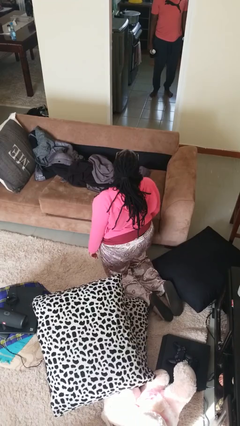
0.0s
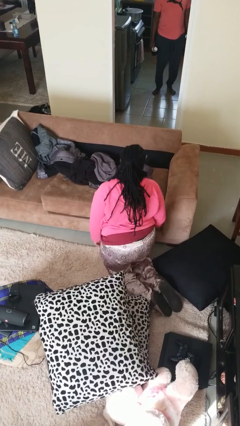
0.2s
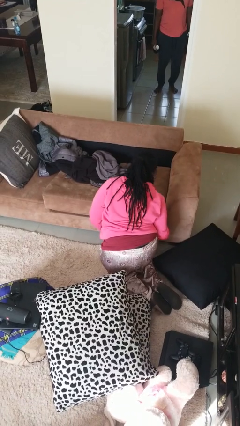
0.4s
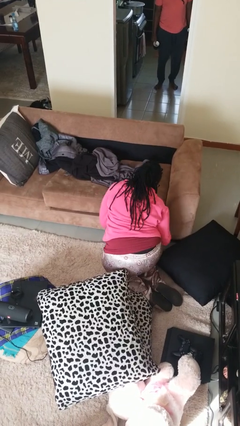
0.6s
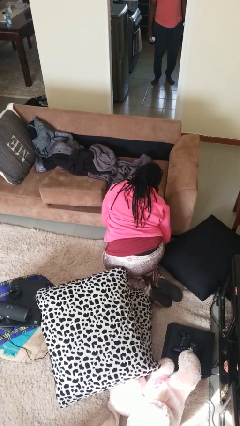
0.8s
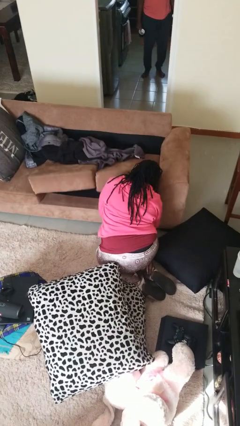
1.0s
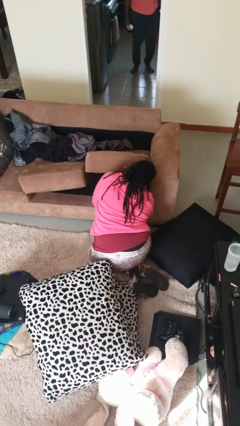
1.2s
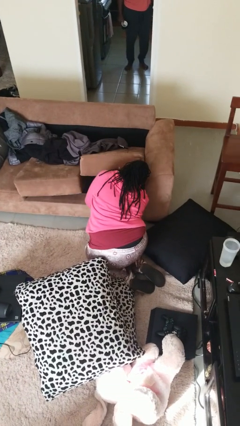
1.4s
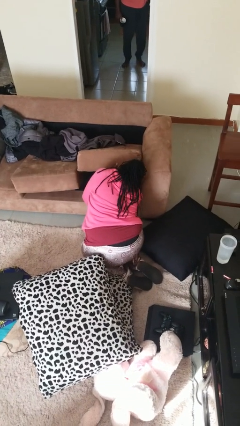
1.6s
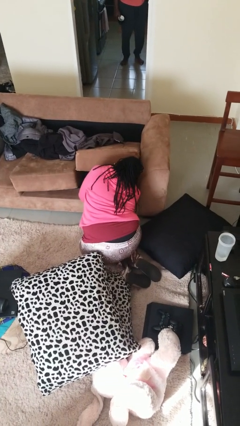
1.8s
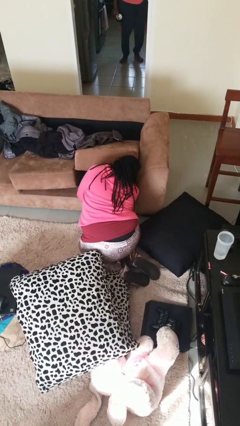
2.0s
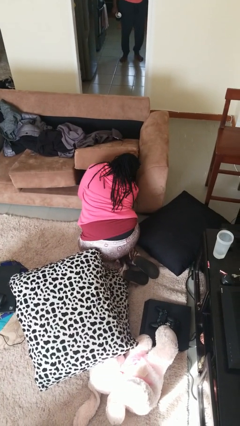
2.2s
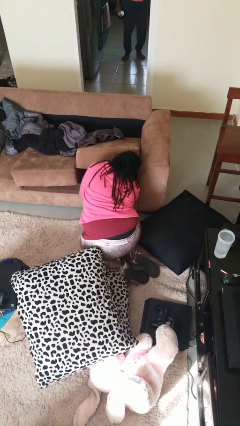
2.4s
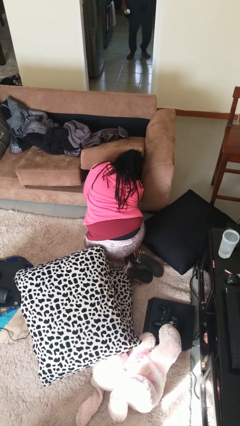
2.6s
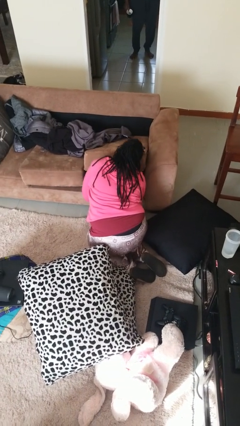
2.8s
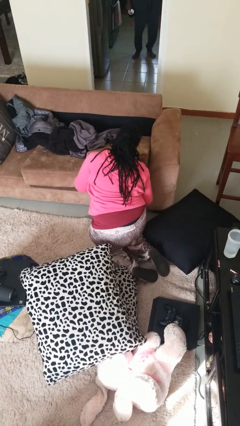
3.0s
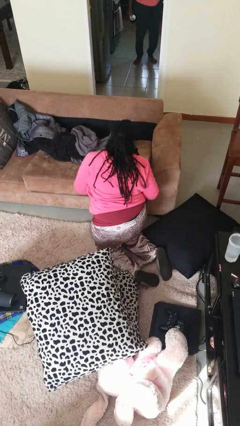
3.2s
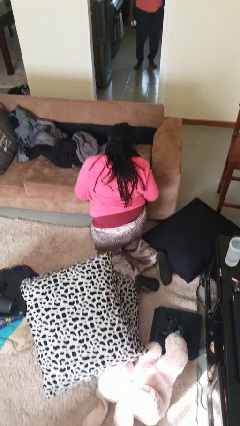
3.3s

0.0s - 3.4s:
person searches under couch

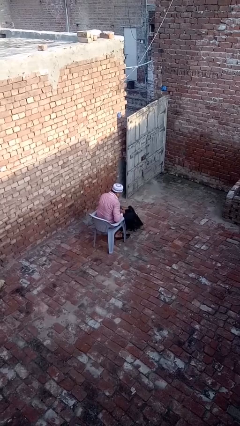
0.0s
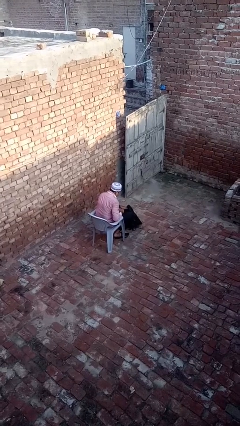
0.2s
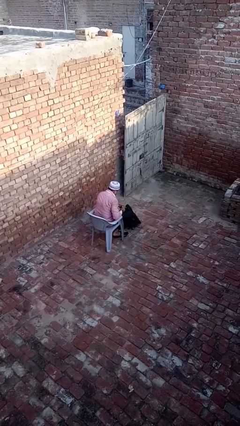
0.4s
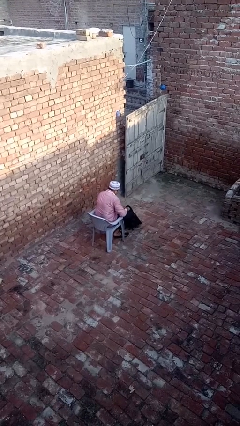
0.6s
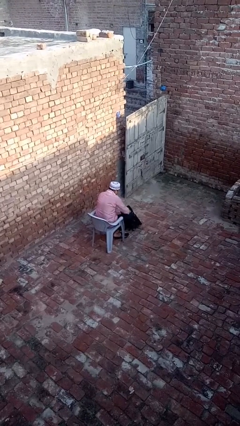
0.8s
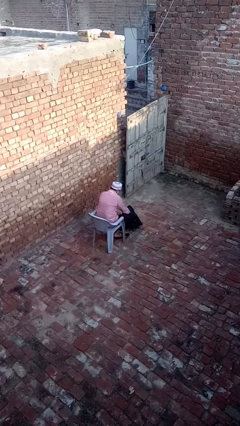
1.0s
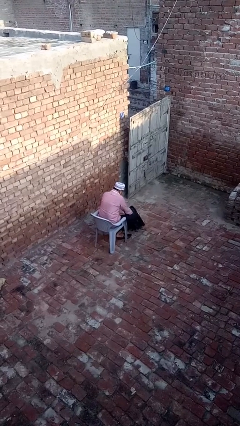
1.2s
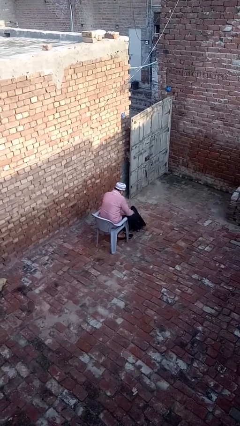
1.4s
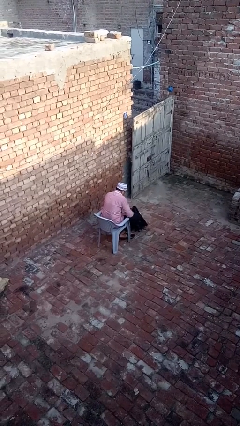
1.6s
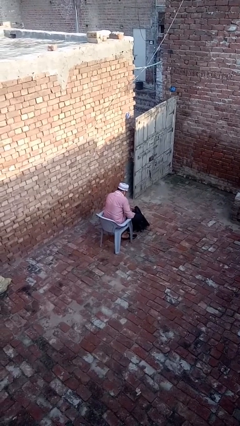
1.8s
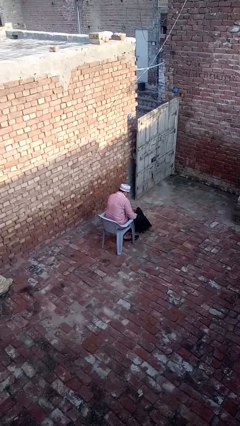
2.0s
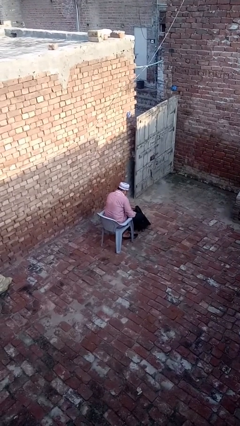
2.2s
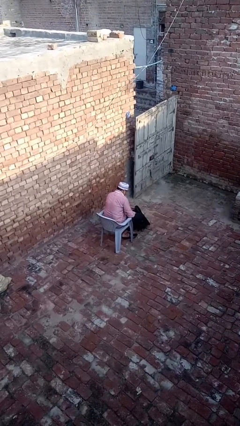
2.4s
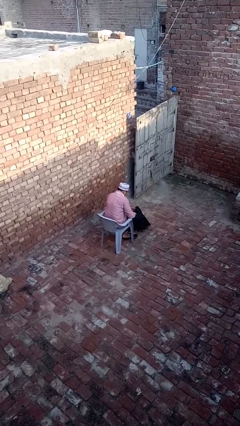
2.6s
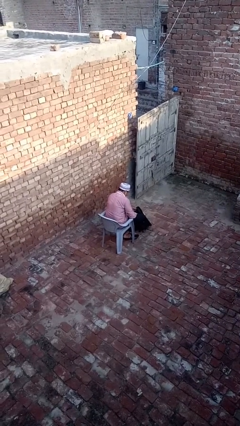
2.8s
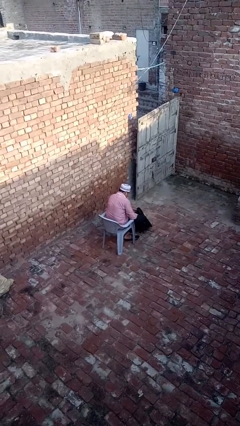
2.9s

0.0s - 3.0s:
person puts object into backpack

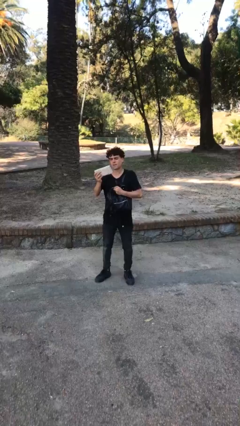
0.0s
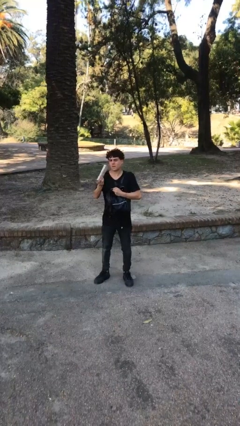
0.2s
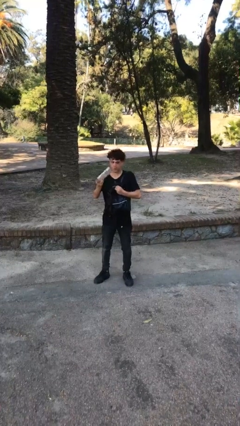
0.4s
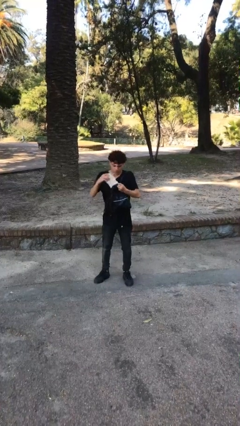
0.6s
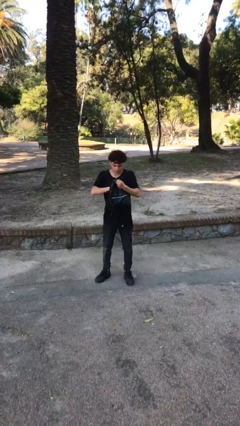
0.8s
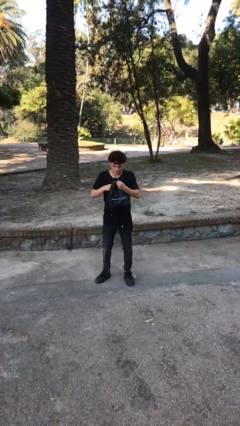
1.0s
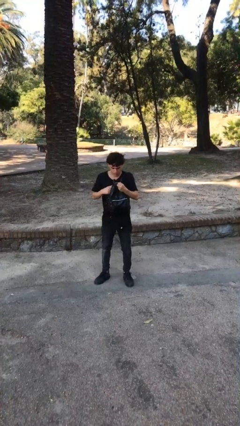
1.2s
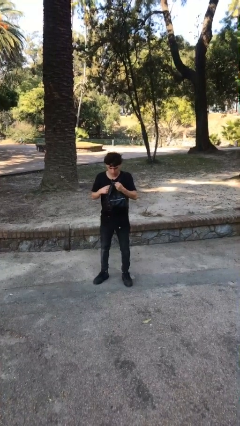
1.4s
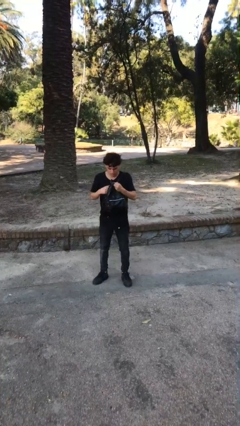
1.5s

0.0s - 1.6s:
person puts object into purse

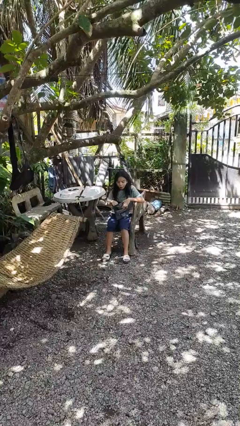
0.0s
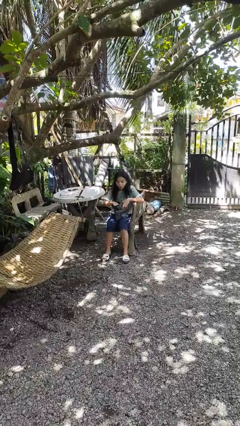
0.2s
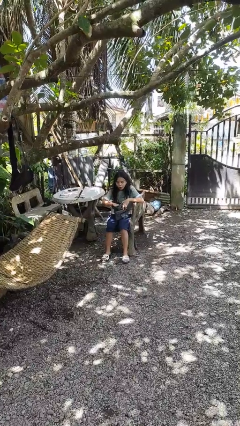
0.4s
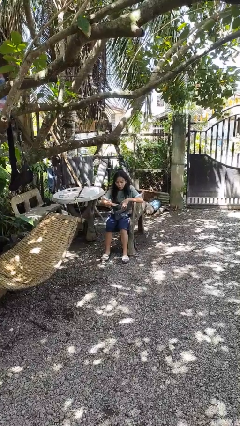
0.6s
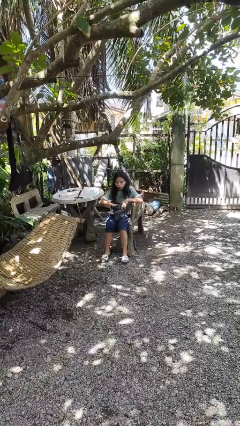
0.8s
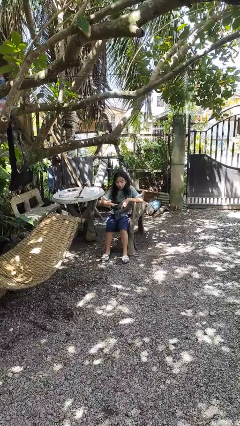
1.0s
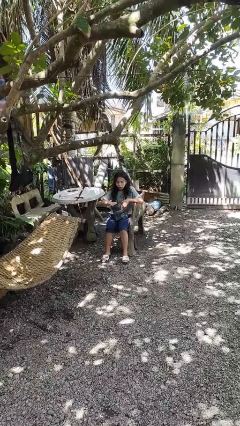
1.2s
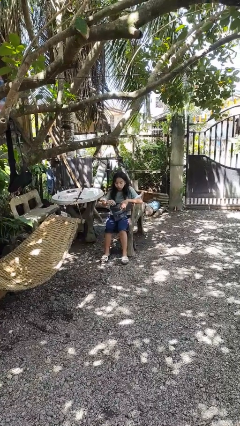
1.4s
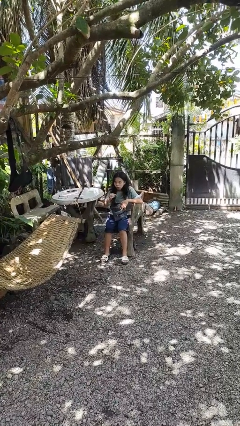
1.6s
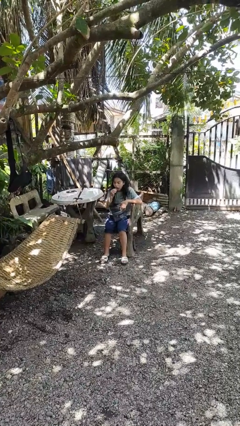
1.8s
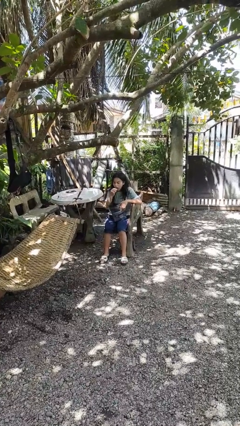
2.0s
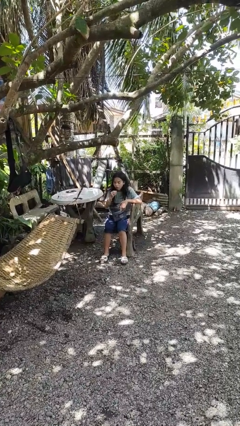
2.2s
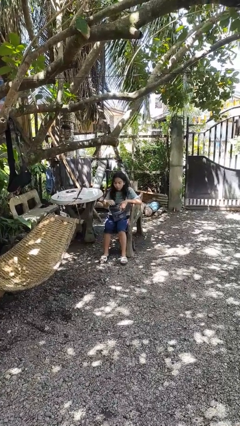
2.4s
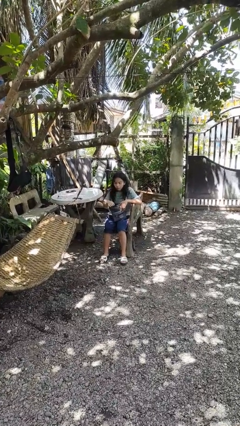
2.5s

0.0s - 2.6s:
person eats snack from bag

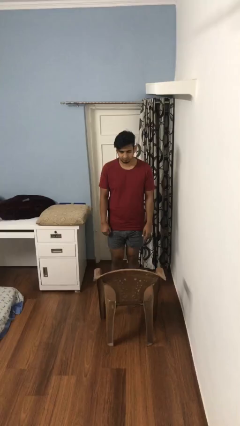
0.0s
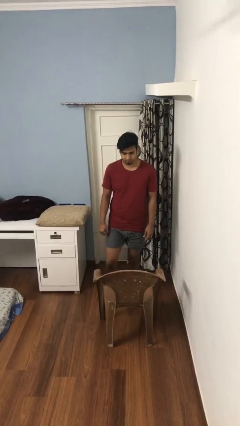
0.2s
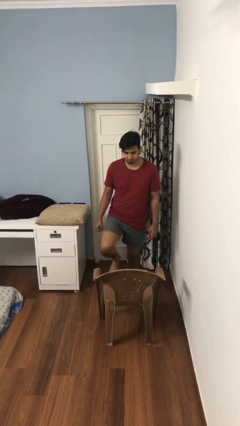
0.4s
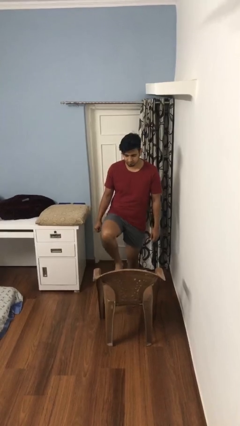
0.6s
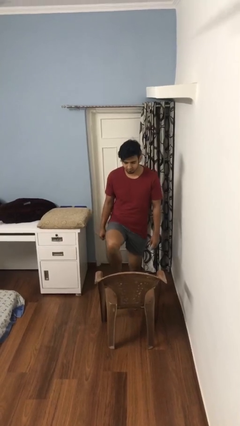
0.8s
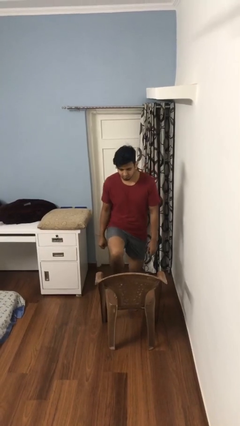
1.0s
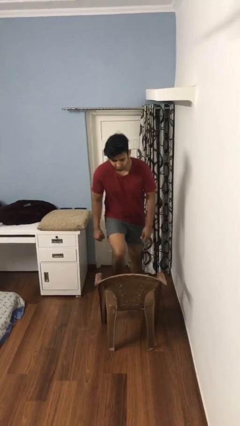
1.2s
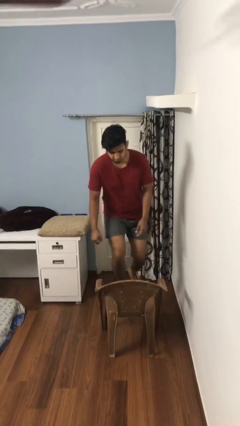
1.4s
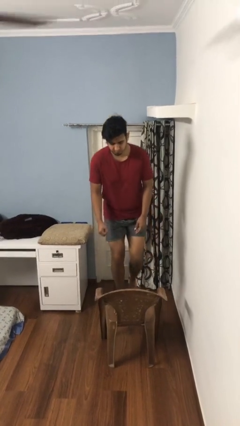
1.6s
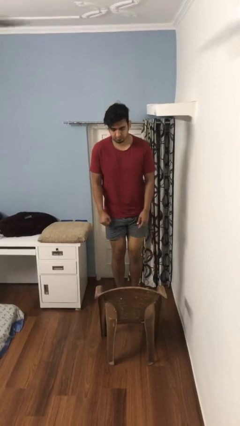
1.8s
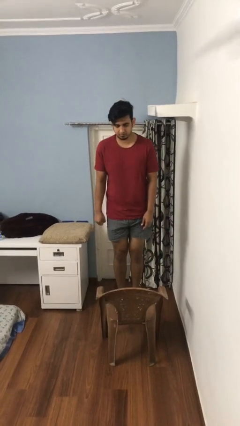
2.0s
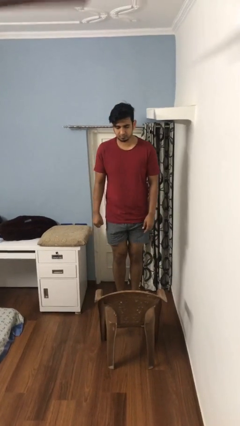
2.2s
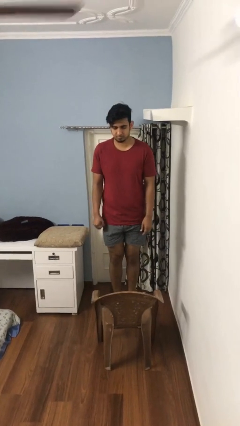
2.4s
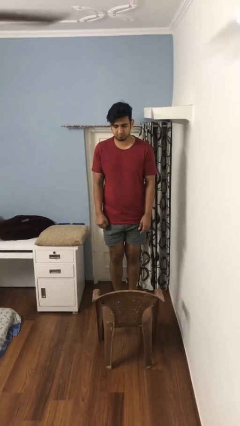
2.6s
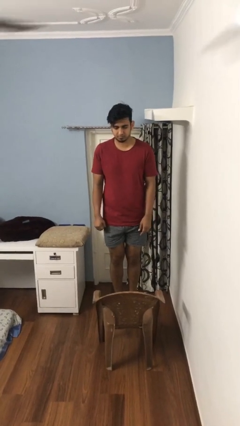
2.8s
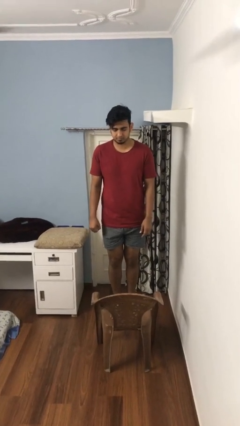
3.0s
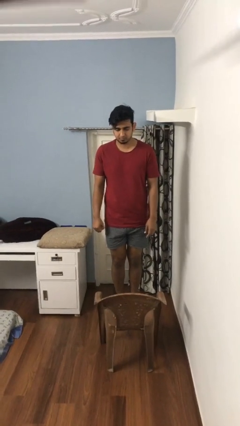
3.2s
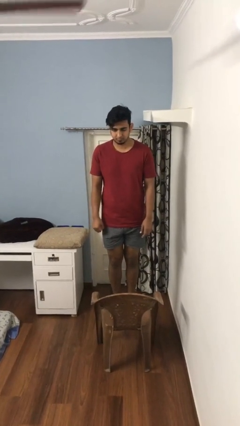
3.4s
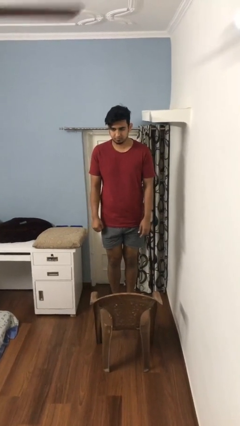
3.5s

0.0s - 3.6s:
person climbs on chair

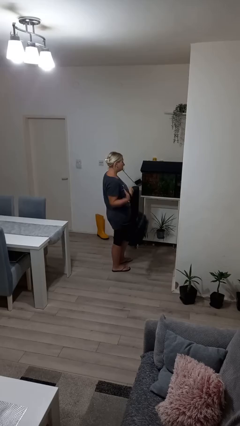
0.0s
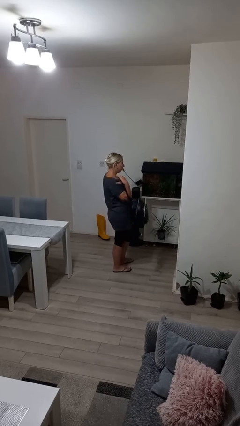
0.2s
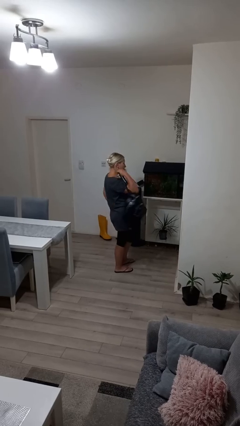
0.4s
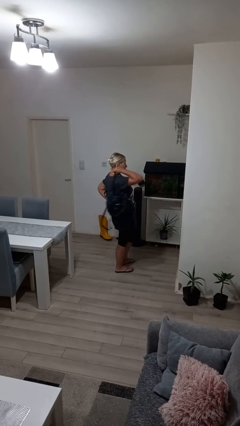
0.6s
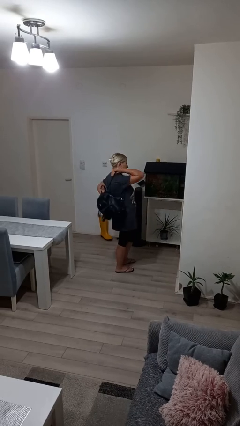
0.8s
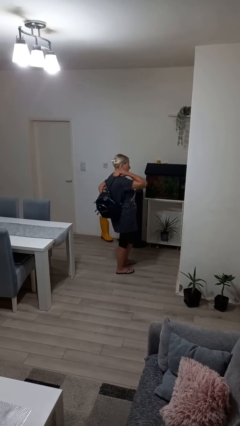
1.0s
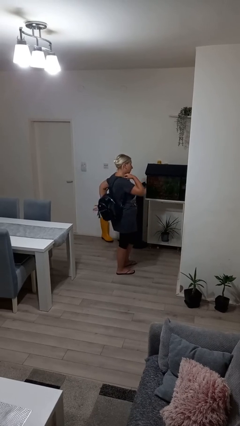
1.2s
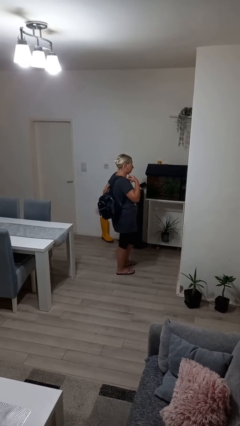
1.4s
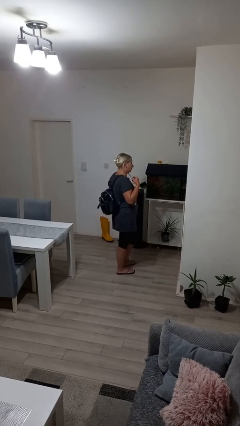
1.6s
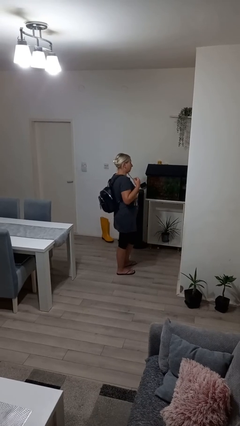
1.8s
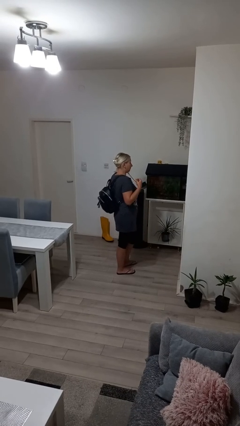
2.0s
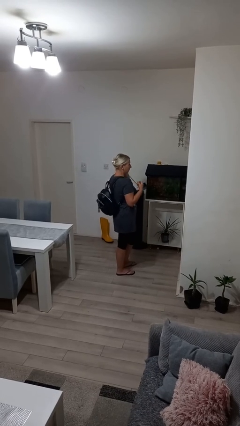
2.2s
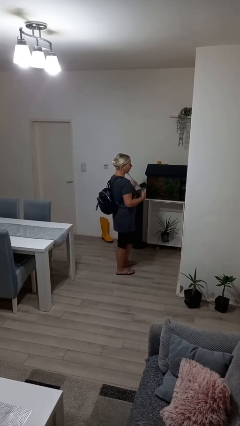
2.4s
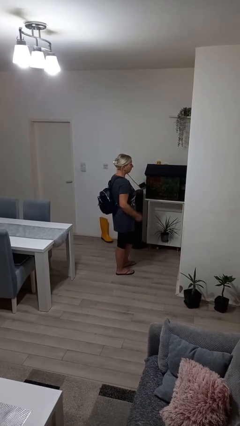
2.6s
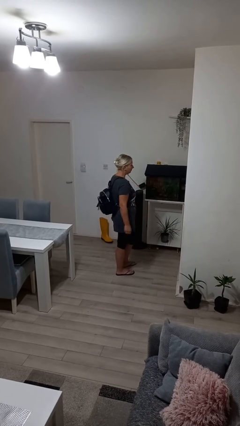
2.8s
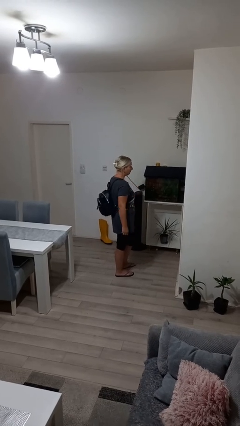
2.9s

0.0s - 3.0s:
person puts on backpack

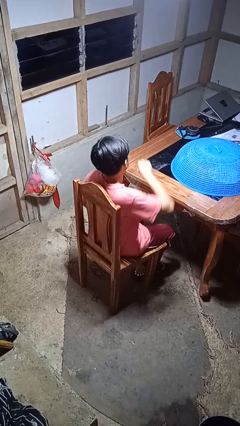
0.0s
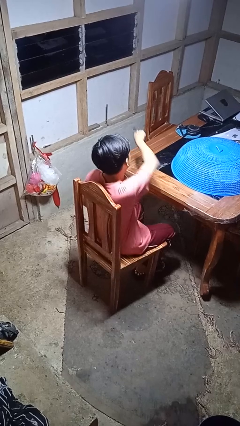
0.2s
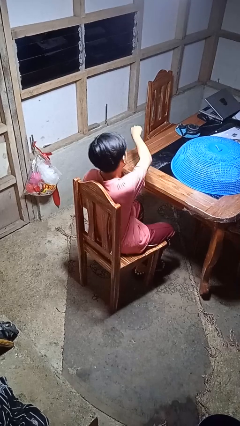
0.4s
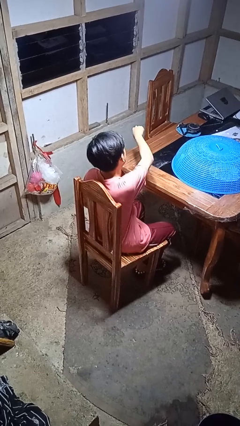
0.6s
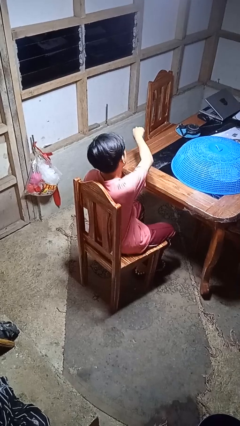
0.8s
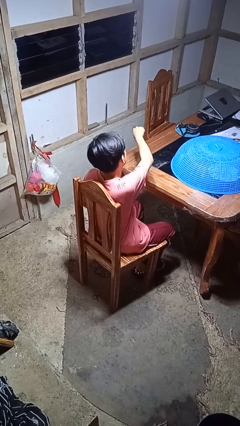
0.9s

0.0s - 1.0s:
person punches
